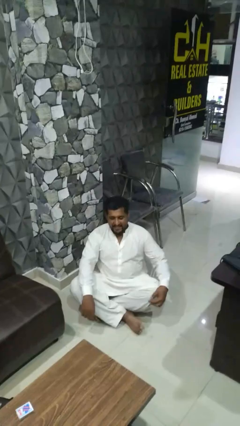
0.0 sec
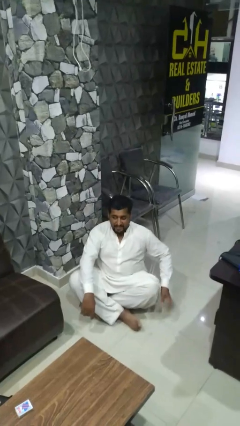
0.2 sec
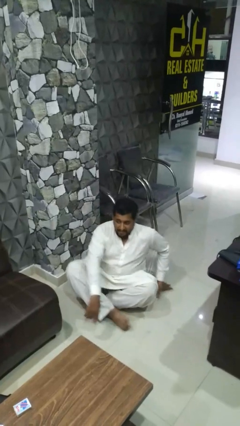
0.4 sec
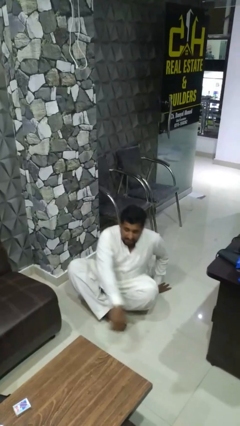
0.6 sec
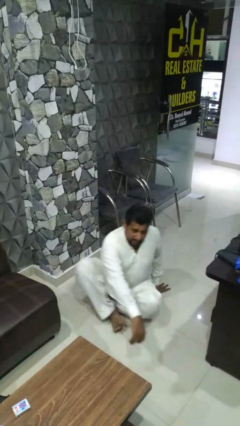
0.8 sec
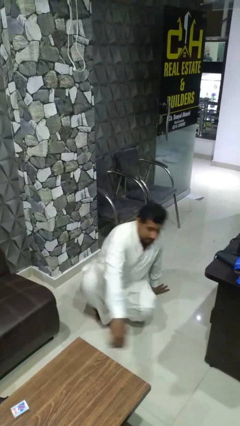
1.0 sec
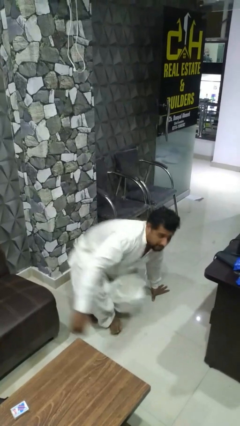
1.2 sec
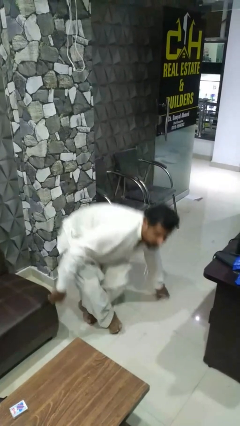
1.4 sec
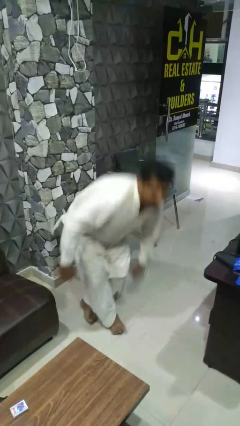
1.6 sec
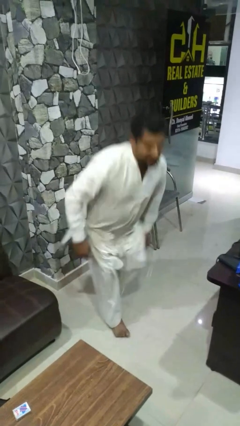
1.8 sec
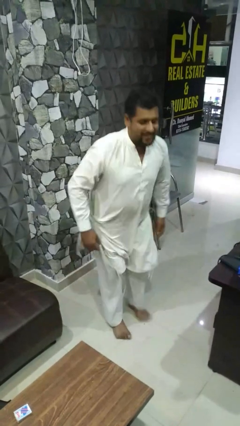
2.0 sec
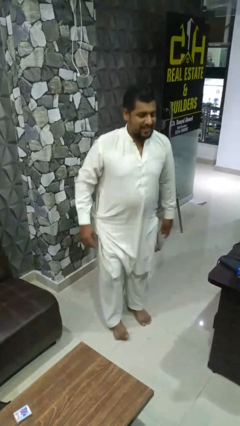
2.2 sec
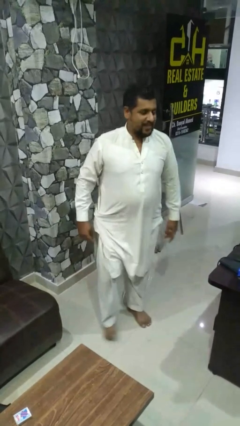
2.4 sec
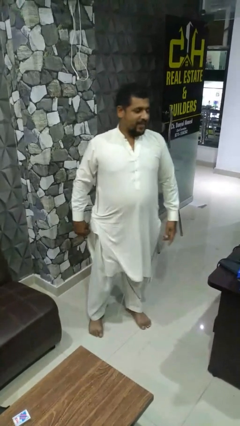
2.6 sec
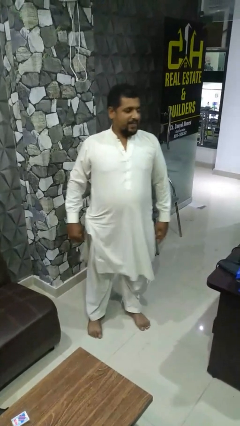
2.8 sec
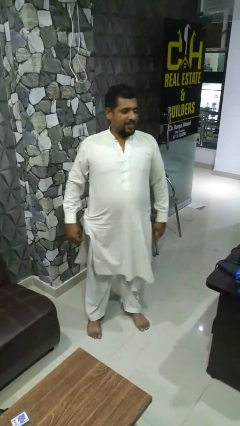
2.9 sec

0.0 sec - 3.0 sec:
person stands up from floor

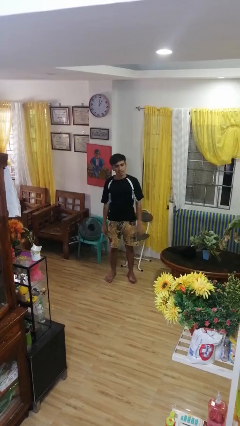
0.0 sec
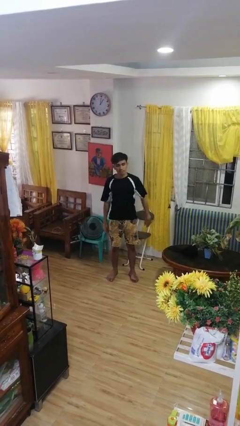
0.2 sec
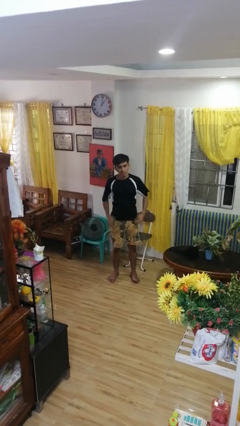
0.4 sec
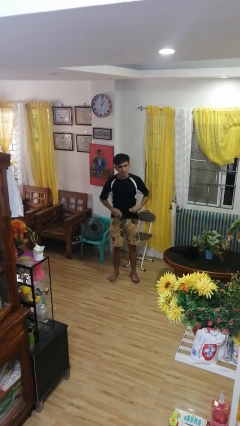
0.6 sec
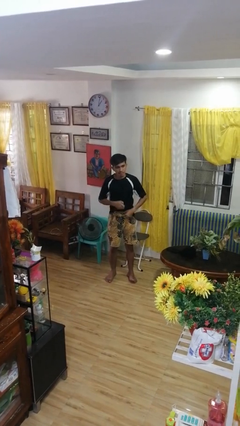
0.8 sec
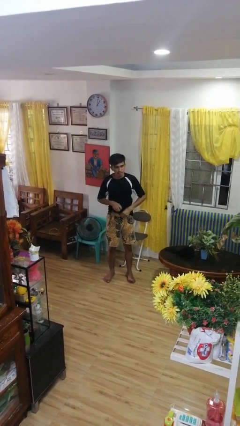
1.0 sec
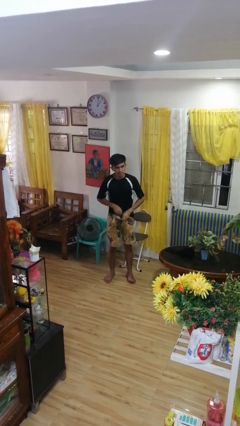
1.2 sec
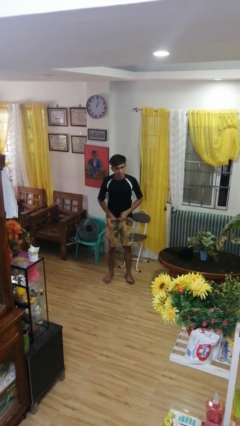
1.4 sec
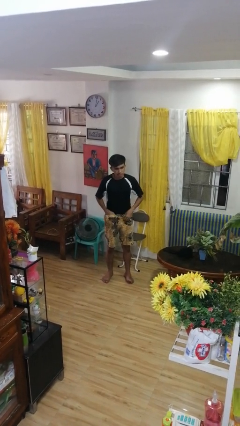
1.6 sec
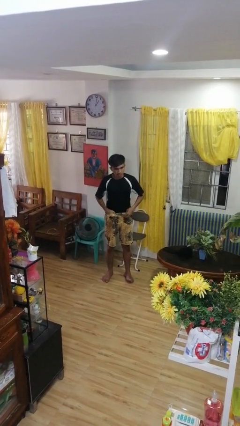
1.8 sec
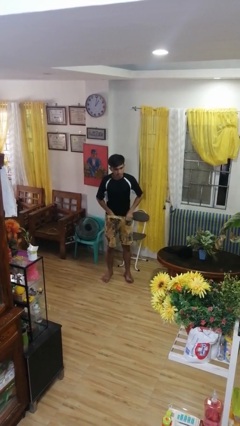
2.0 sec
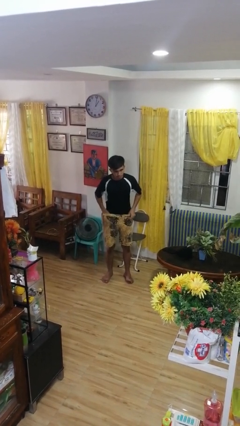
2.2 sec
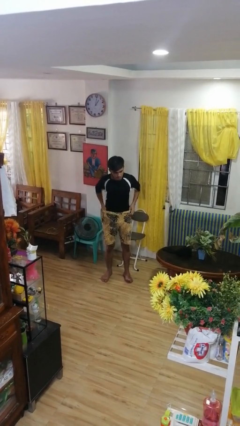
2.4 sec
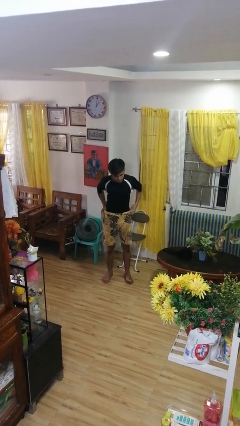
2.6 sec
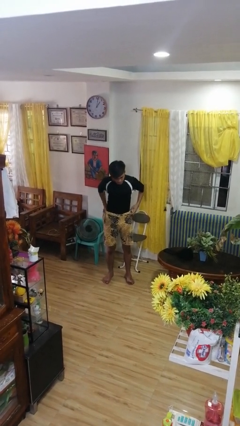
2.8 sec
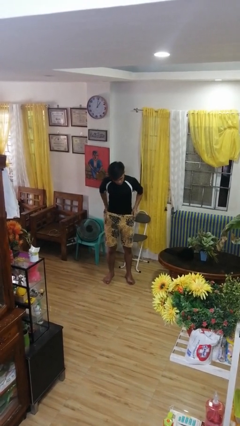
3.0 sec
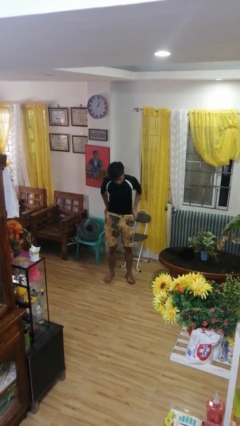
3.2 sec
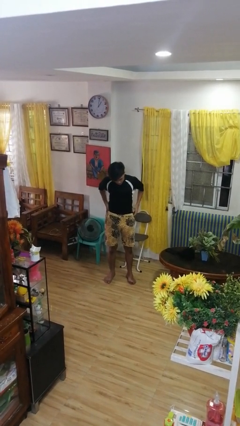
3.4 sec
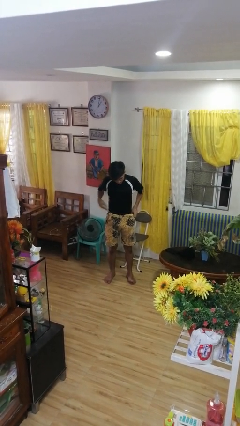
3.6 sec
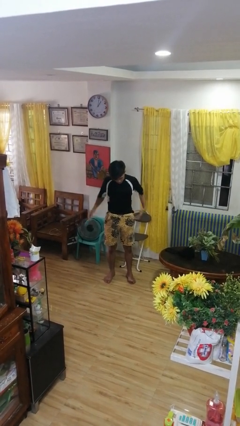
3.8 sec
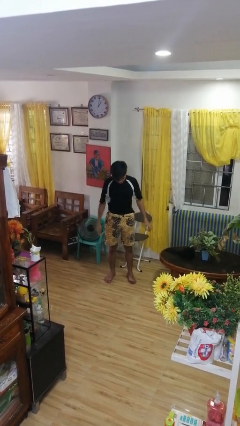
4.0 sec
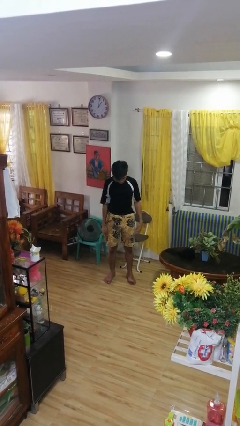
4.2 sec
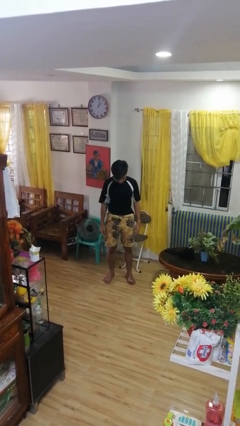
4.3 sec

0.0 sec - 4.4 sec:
person tucks in shirt

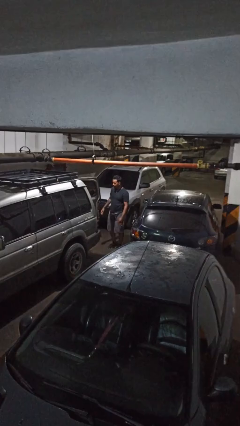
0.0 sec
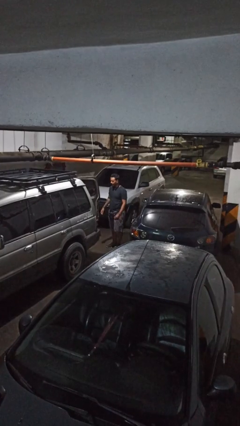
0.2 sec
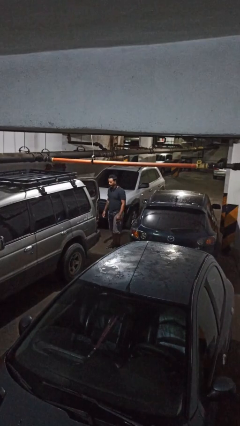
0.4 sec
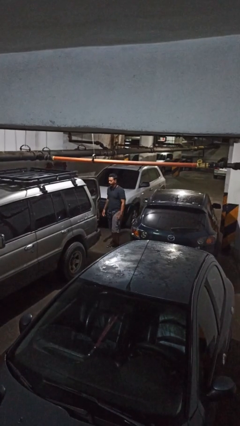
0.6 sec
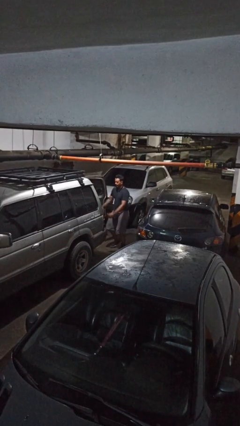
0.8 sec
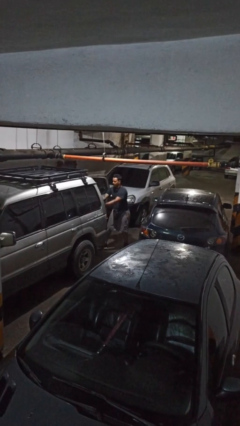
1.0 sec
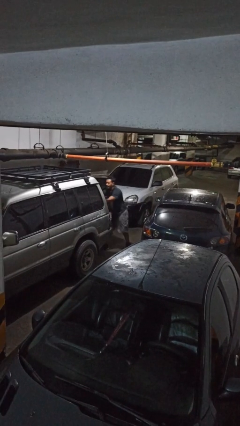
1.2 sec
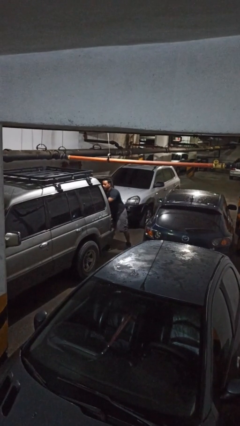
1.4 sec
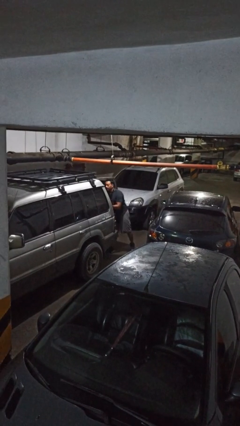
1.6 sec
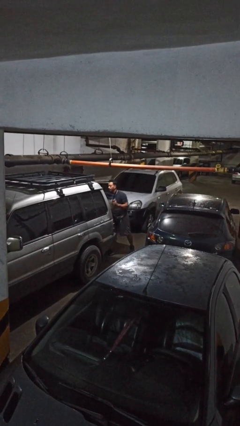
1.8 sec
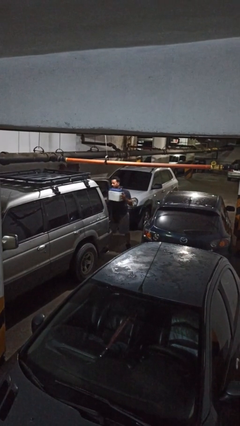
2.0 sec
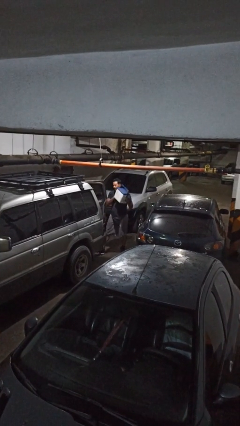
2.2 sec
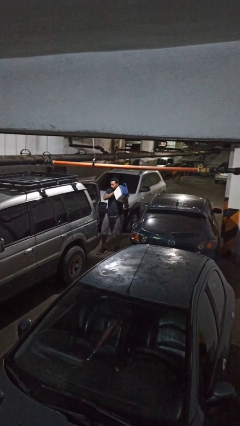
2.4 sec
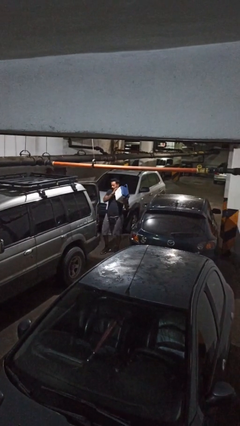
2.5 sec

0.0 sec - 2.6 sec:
person unloads car

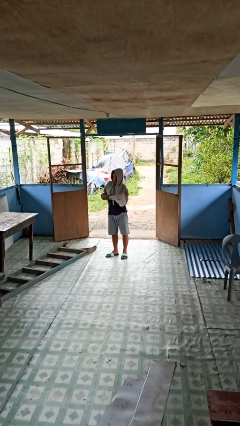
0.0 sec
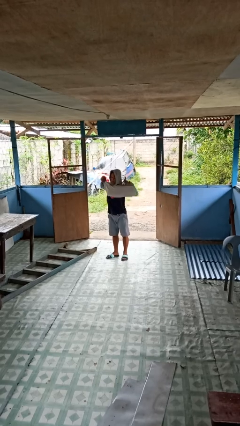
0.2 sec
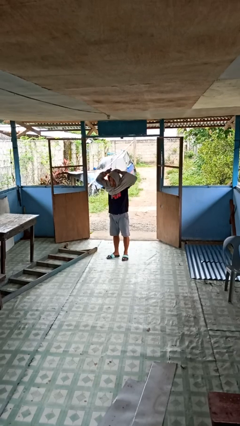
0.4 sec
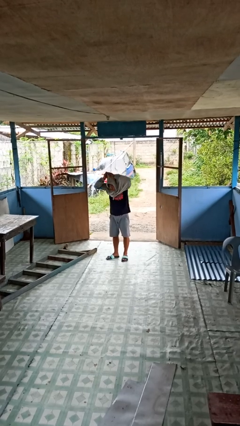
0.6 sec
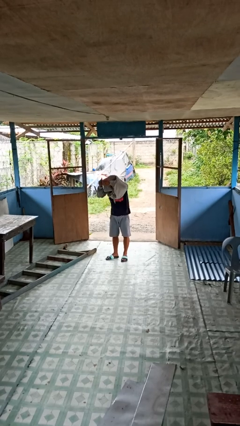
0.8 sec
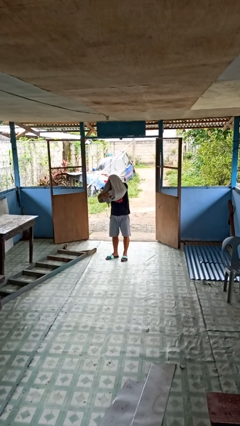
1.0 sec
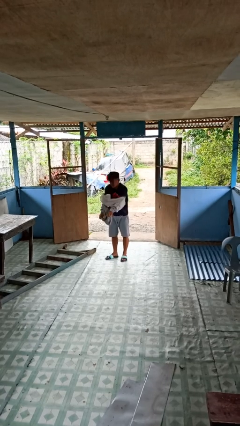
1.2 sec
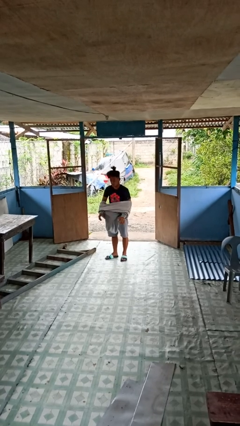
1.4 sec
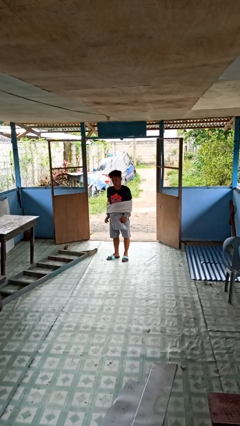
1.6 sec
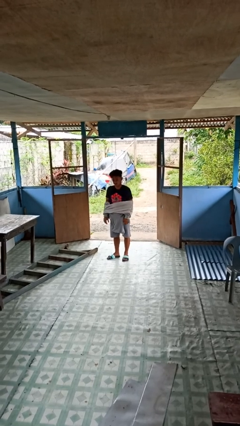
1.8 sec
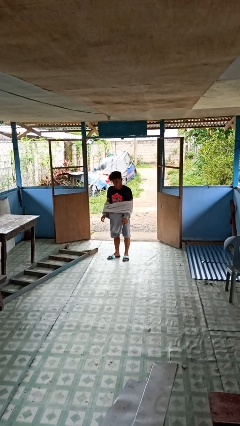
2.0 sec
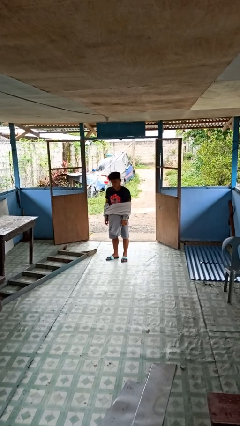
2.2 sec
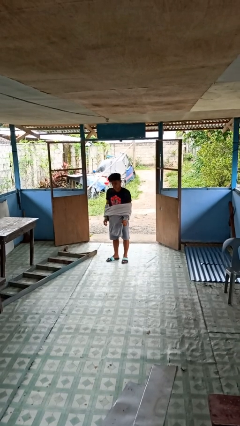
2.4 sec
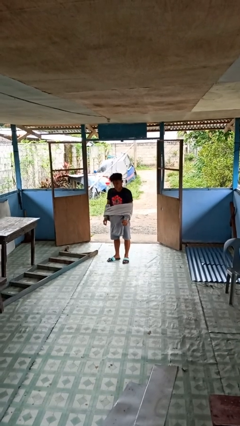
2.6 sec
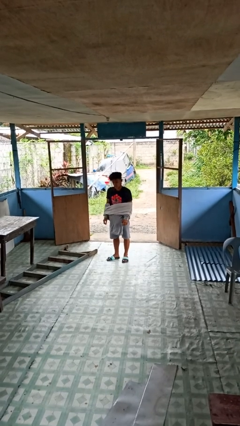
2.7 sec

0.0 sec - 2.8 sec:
person takes off hoodie

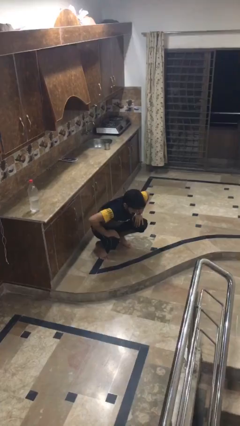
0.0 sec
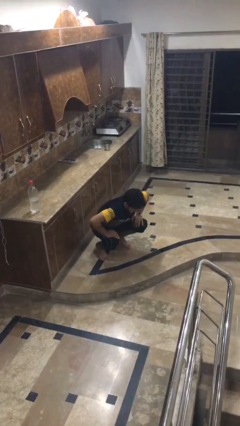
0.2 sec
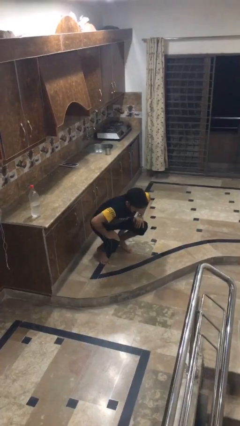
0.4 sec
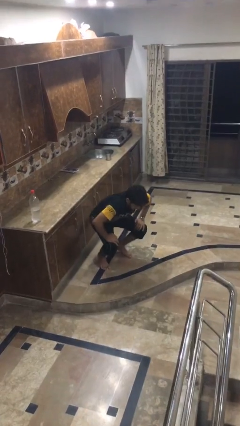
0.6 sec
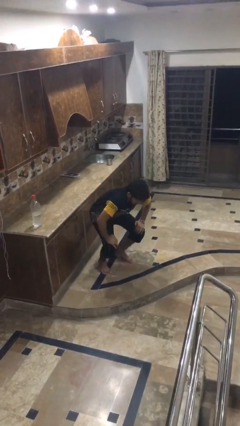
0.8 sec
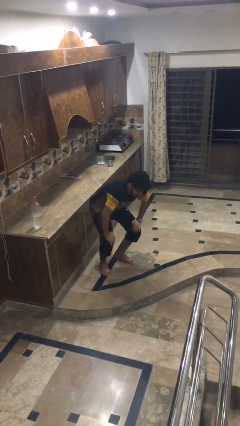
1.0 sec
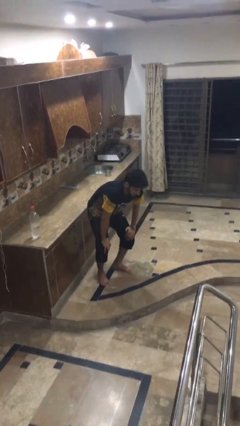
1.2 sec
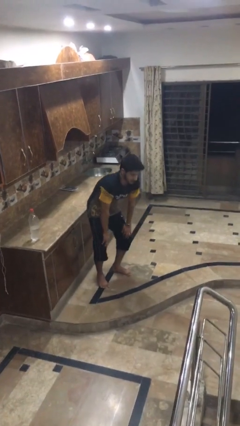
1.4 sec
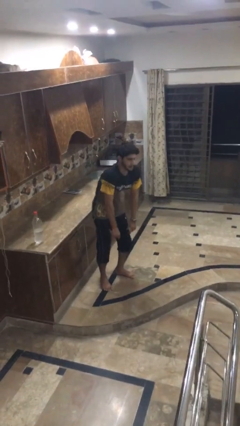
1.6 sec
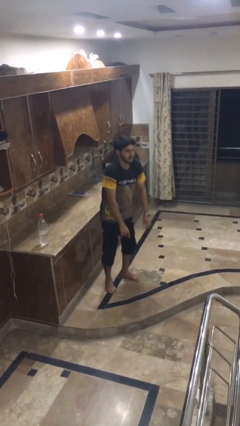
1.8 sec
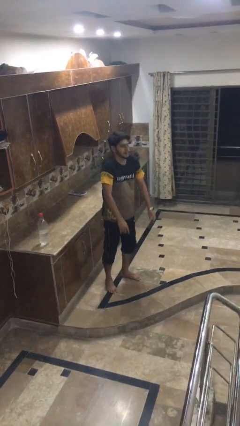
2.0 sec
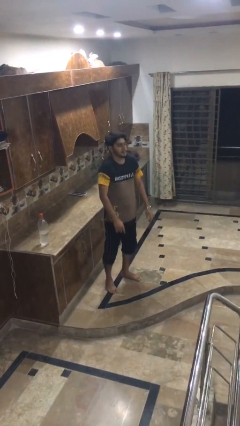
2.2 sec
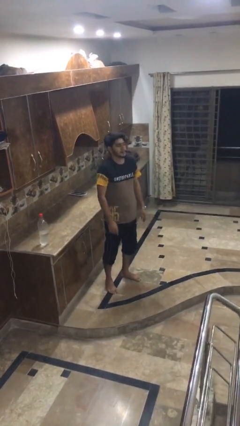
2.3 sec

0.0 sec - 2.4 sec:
person stands up

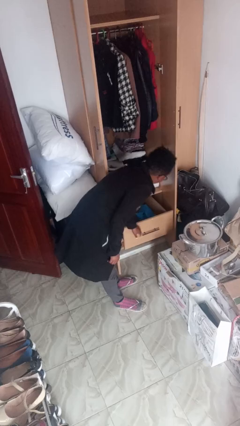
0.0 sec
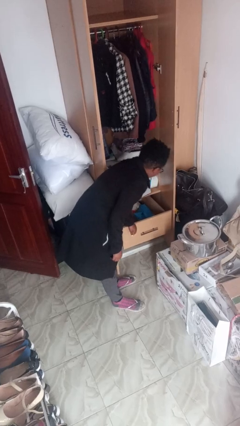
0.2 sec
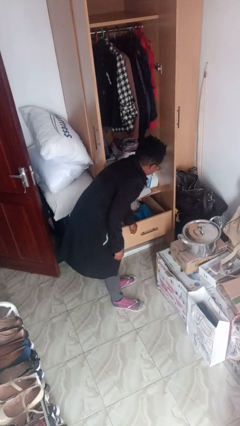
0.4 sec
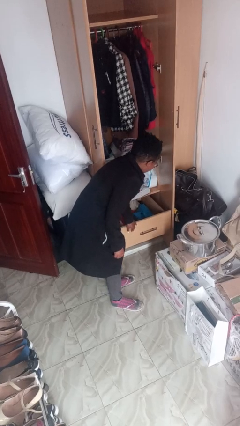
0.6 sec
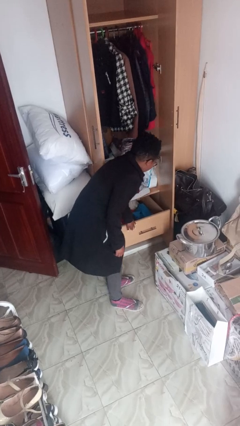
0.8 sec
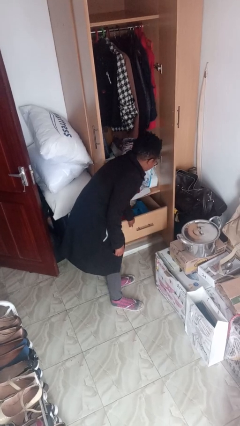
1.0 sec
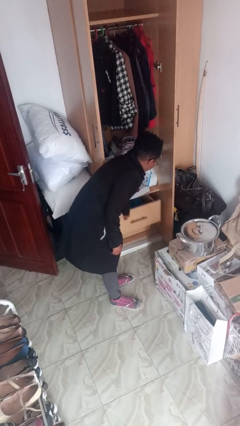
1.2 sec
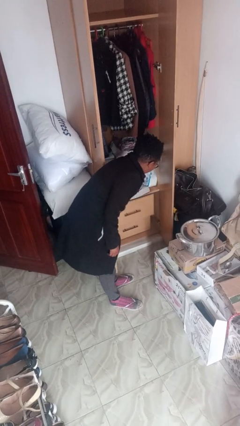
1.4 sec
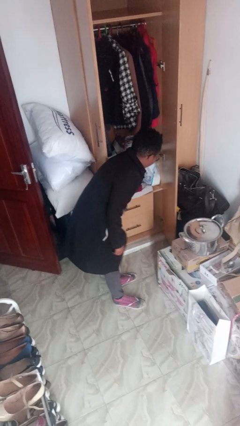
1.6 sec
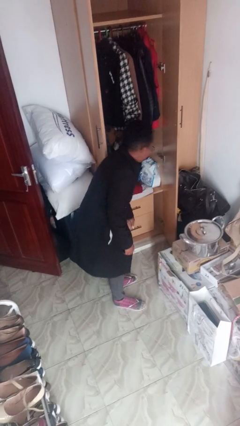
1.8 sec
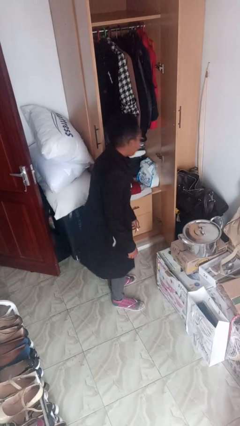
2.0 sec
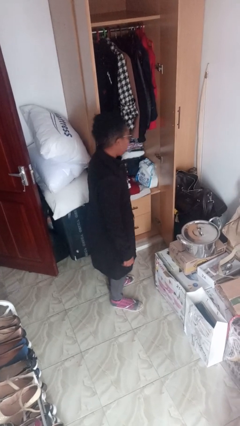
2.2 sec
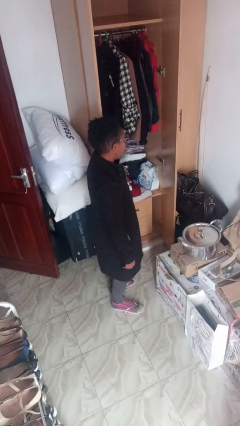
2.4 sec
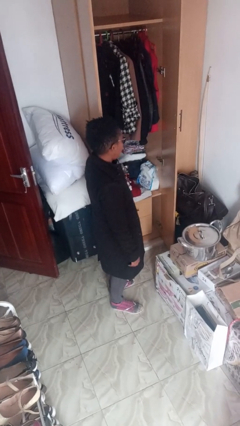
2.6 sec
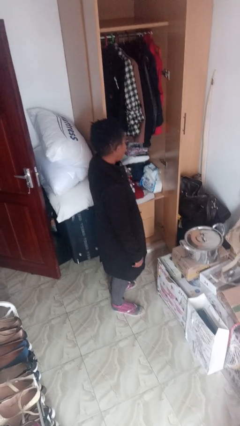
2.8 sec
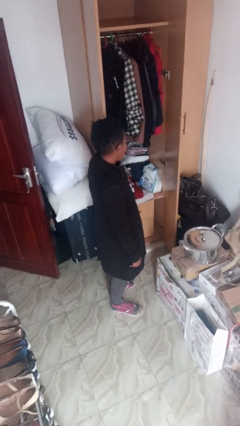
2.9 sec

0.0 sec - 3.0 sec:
person closes dresser drawer
